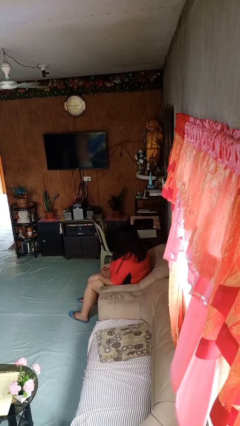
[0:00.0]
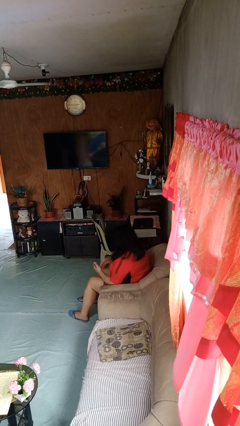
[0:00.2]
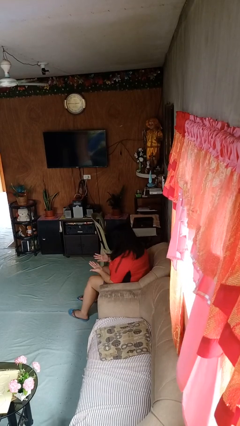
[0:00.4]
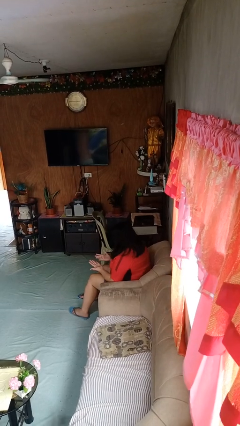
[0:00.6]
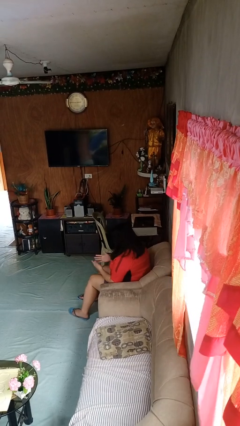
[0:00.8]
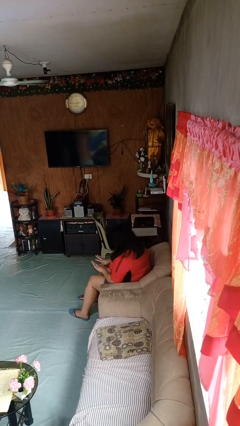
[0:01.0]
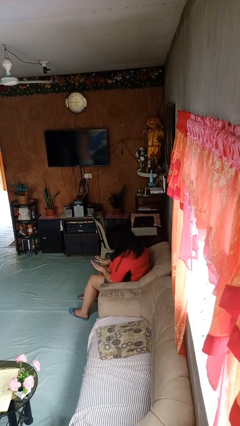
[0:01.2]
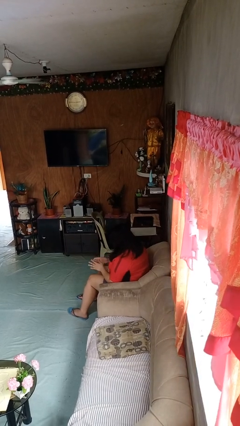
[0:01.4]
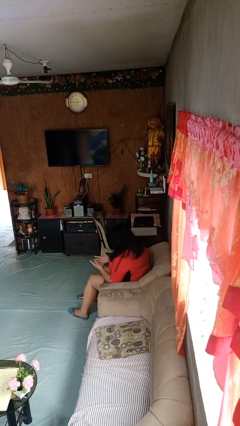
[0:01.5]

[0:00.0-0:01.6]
person looks at hands in lap

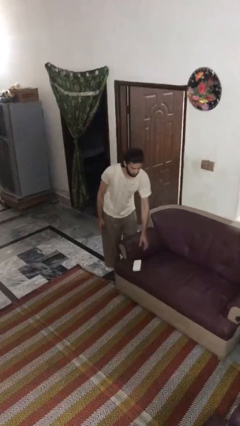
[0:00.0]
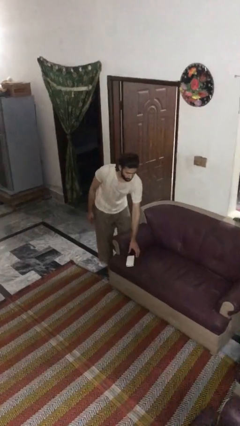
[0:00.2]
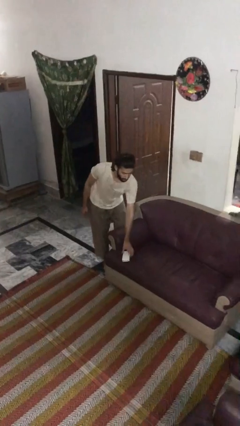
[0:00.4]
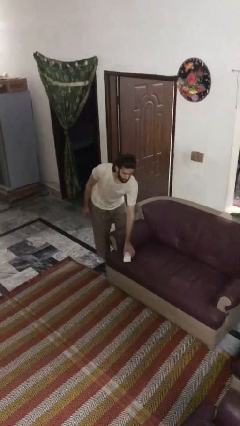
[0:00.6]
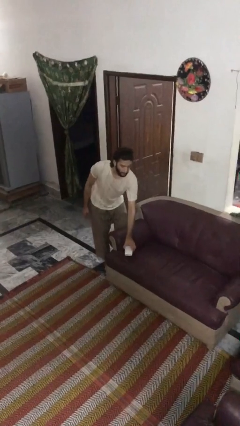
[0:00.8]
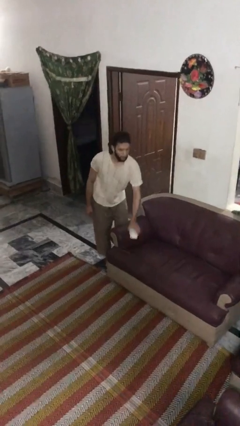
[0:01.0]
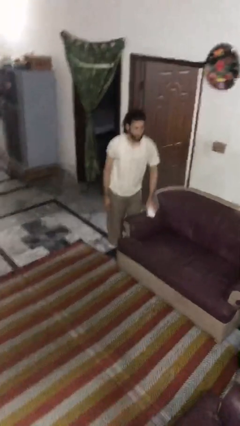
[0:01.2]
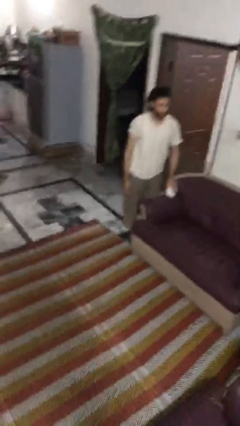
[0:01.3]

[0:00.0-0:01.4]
person picks up object from couch

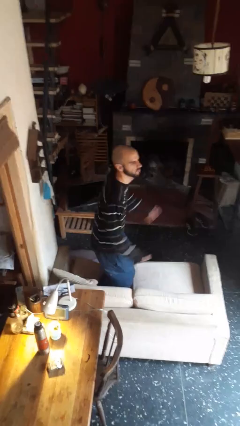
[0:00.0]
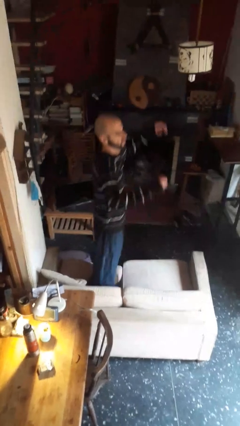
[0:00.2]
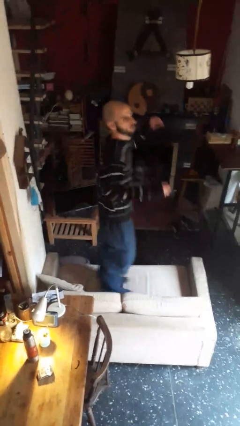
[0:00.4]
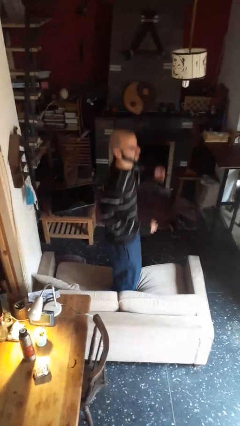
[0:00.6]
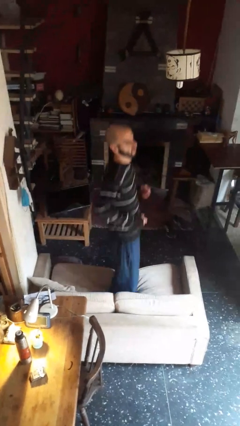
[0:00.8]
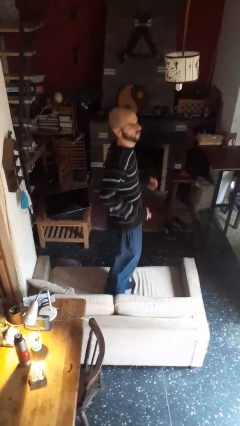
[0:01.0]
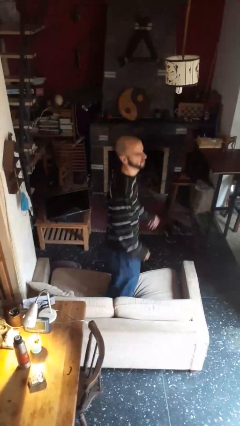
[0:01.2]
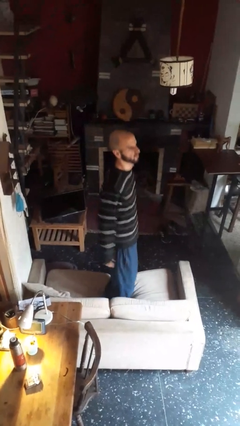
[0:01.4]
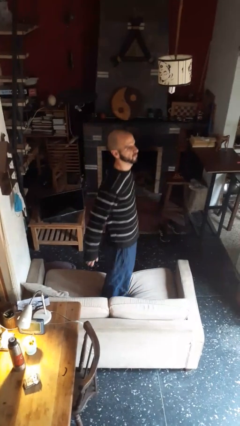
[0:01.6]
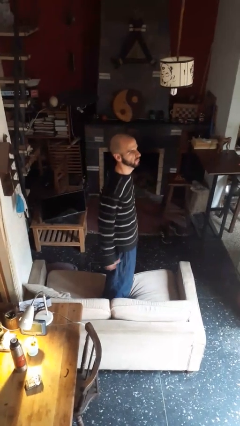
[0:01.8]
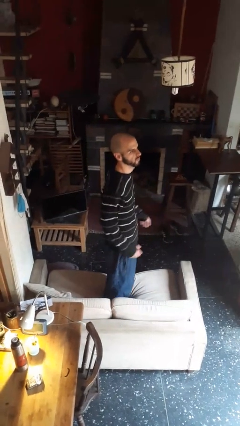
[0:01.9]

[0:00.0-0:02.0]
person jumps on couch

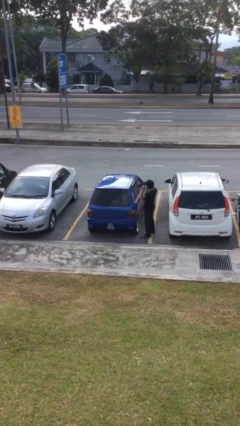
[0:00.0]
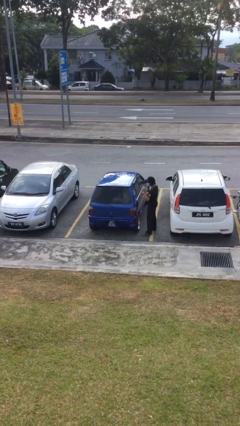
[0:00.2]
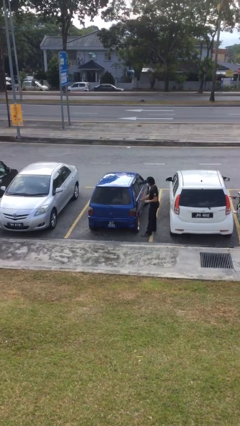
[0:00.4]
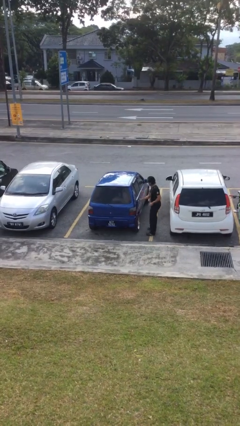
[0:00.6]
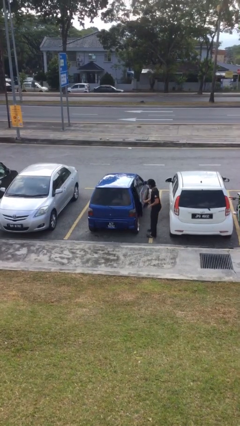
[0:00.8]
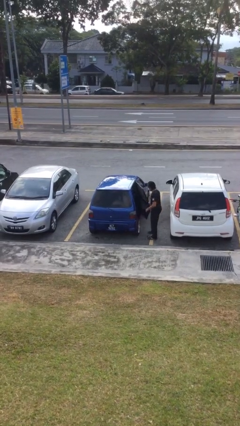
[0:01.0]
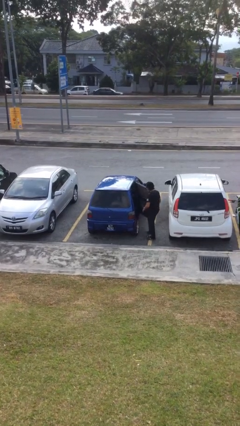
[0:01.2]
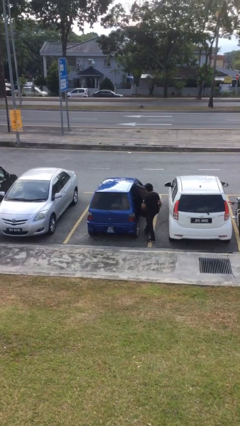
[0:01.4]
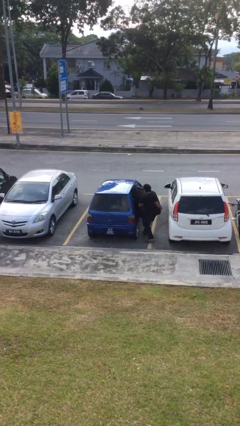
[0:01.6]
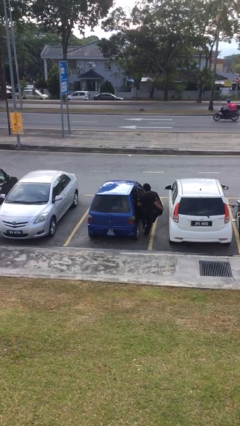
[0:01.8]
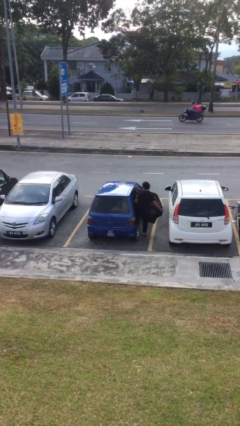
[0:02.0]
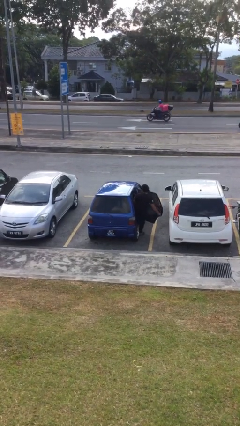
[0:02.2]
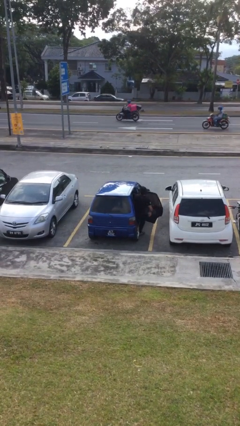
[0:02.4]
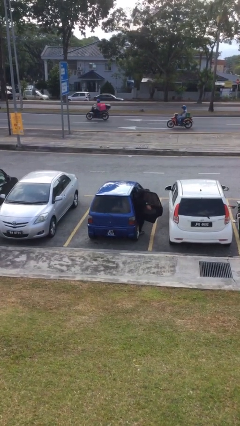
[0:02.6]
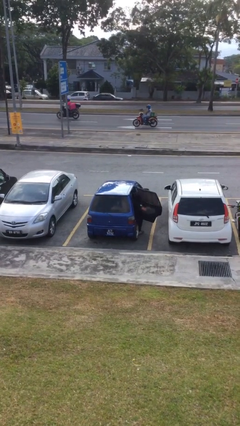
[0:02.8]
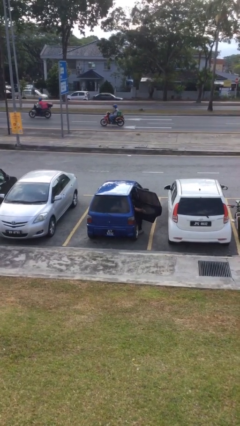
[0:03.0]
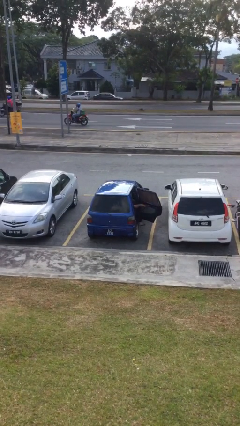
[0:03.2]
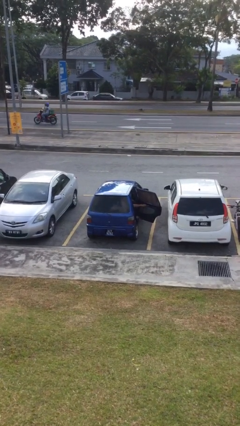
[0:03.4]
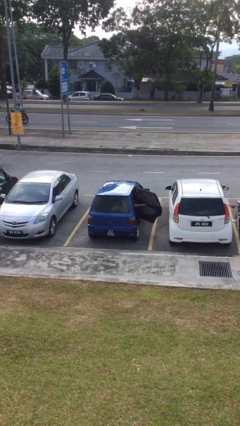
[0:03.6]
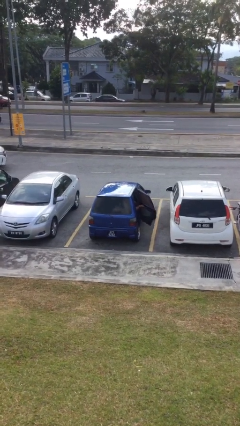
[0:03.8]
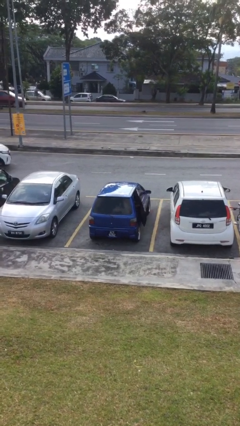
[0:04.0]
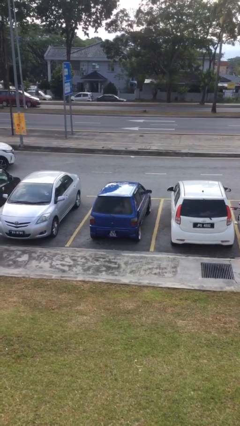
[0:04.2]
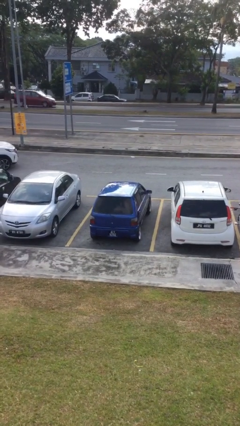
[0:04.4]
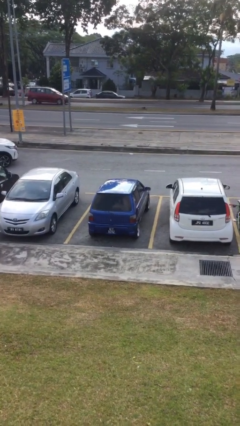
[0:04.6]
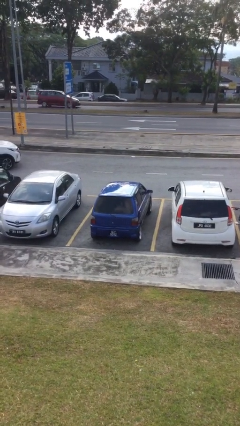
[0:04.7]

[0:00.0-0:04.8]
car picks up person

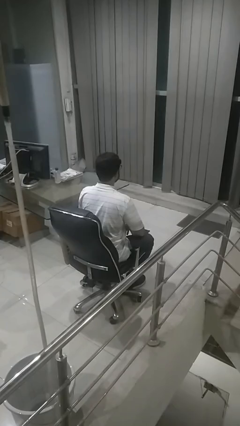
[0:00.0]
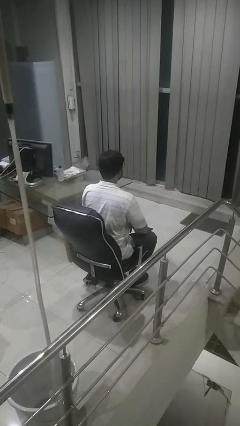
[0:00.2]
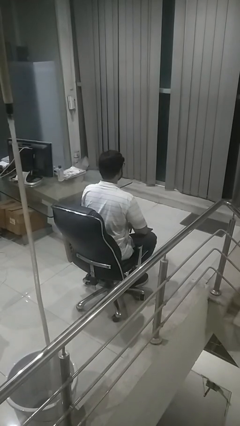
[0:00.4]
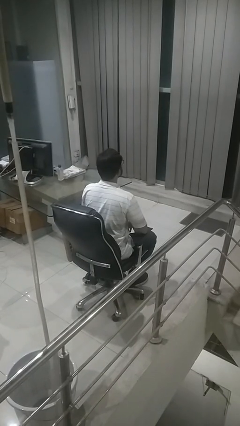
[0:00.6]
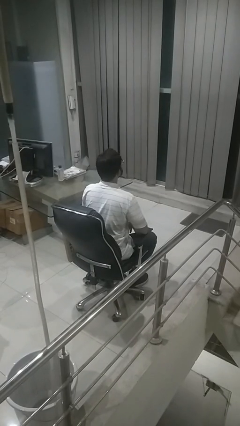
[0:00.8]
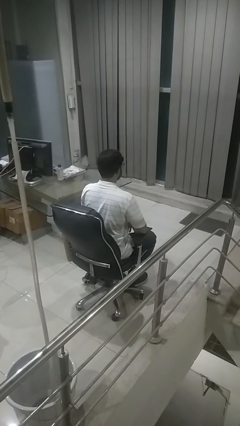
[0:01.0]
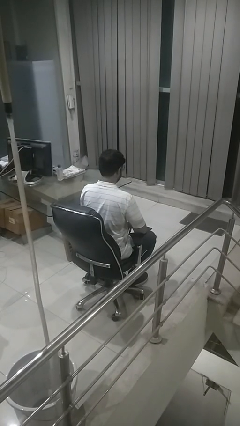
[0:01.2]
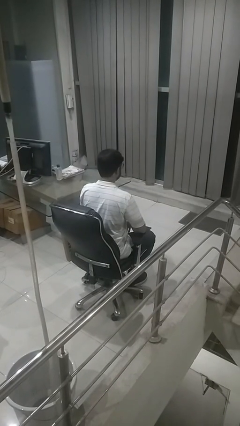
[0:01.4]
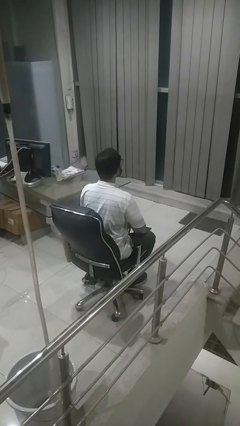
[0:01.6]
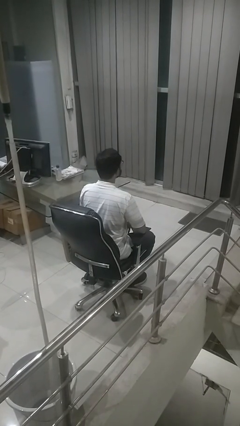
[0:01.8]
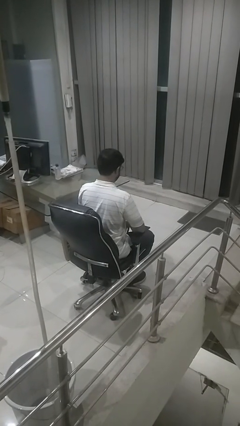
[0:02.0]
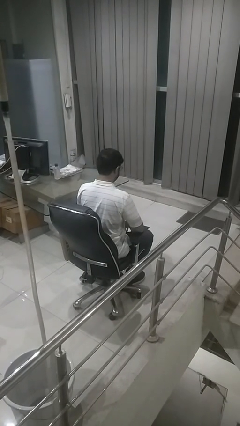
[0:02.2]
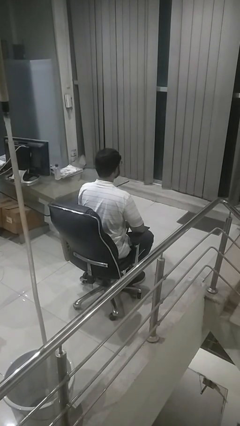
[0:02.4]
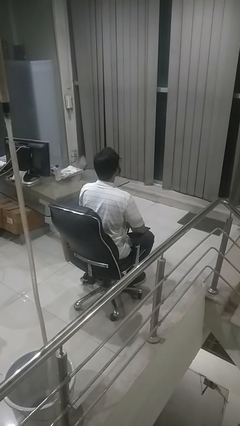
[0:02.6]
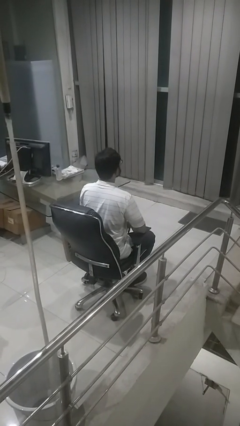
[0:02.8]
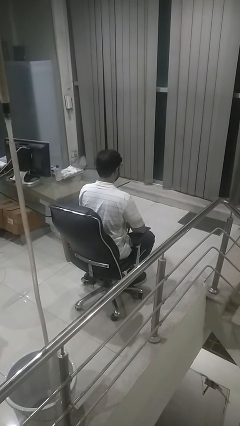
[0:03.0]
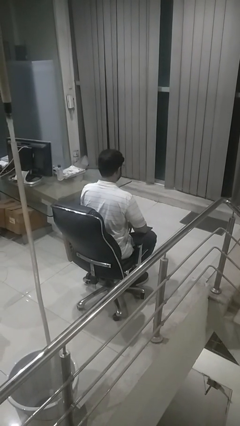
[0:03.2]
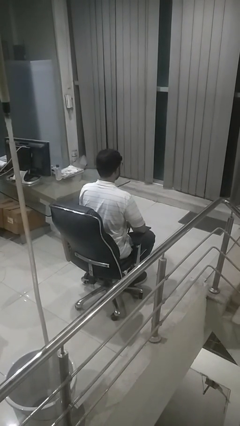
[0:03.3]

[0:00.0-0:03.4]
person nods head

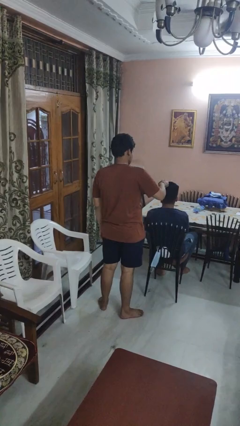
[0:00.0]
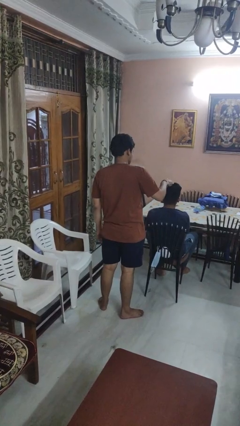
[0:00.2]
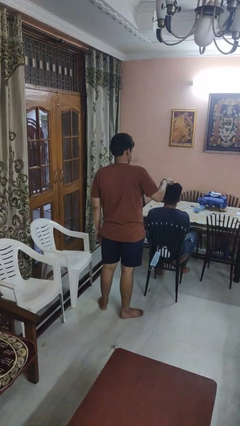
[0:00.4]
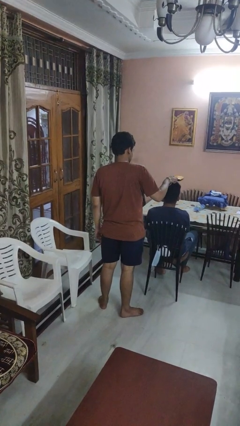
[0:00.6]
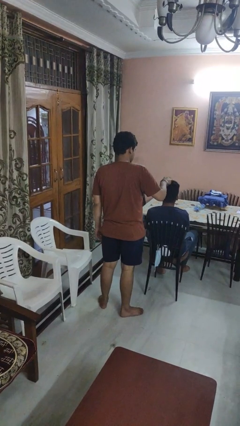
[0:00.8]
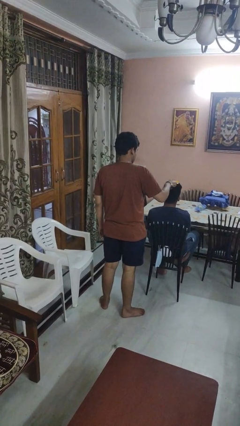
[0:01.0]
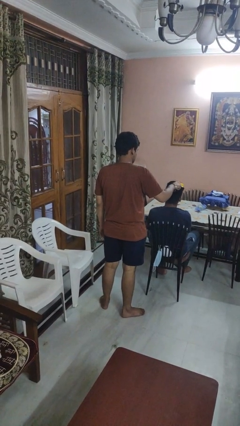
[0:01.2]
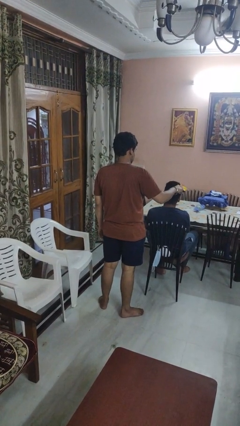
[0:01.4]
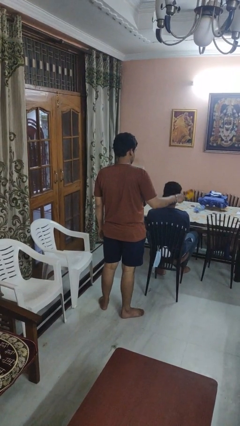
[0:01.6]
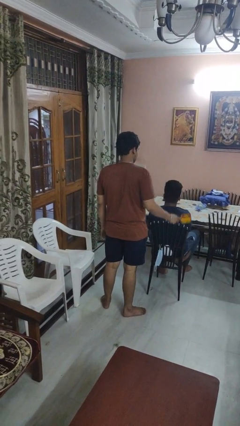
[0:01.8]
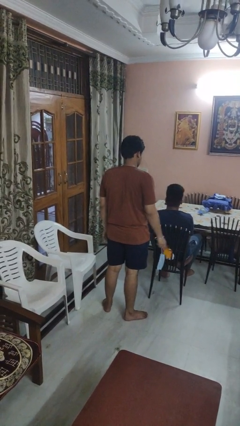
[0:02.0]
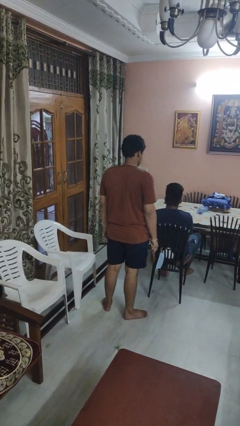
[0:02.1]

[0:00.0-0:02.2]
person brushes hair of person

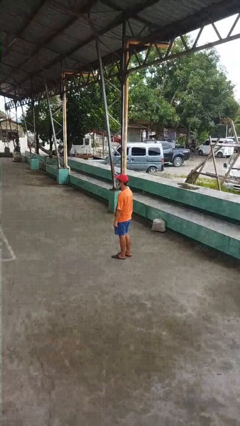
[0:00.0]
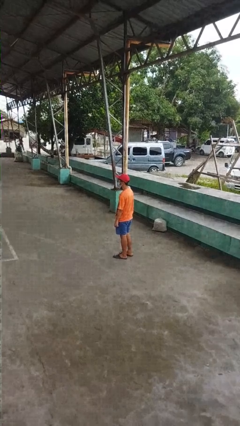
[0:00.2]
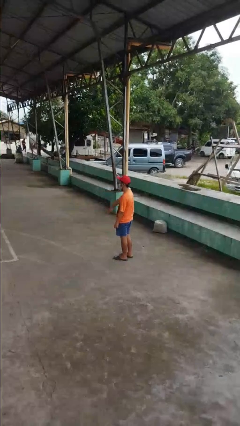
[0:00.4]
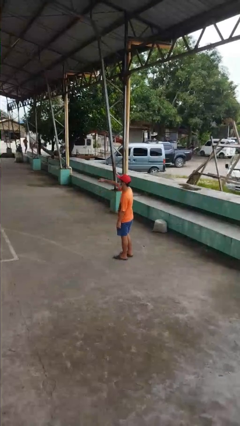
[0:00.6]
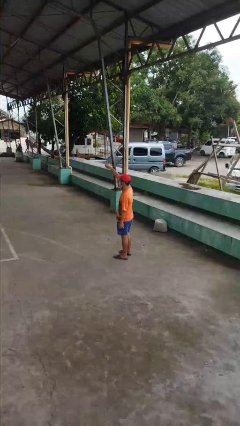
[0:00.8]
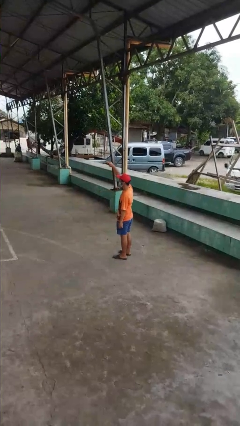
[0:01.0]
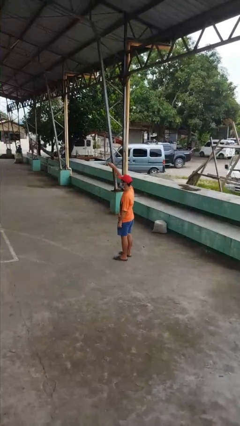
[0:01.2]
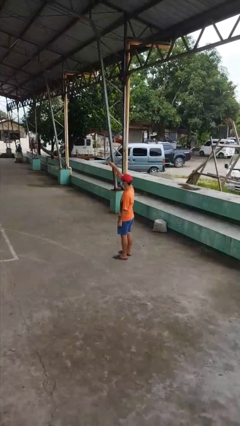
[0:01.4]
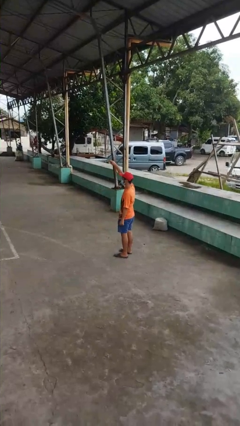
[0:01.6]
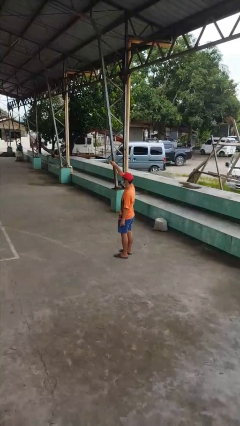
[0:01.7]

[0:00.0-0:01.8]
person gestures swipe up

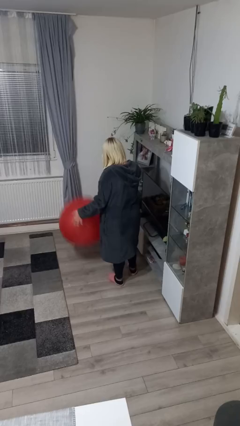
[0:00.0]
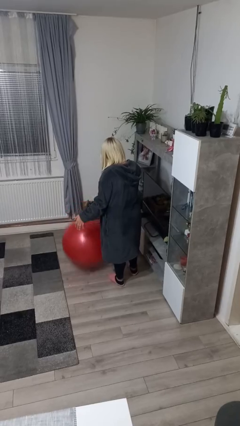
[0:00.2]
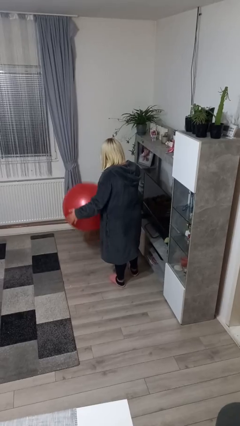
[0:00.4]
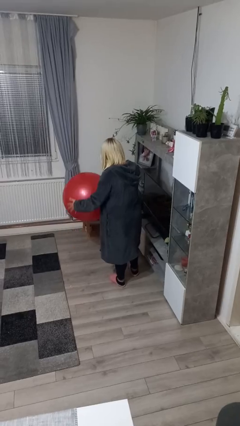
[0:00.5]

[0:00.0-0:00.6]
person bounces ball on floor
